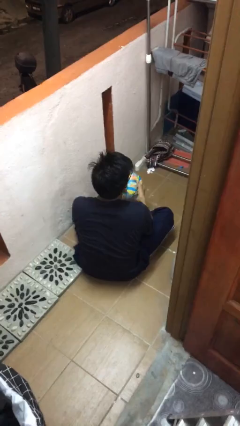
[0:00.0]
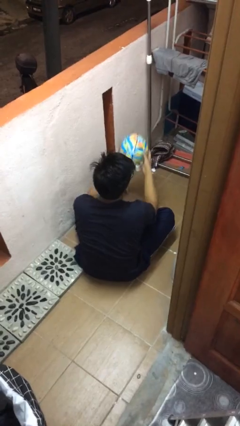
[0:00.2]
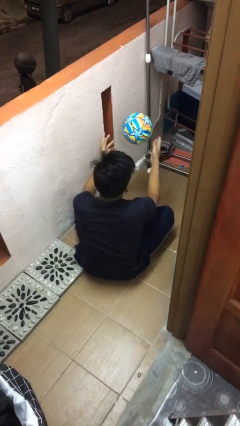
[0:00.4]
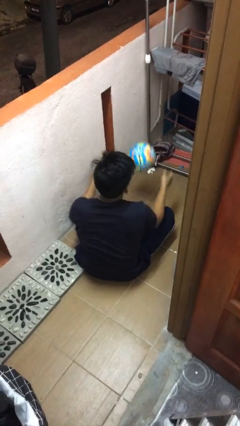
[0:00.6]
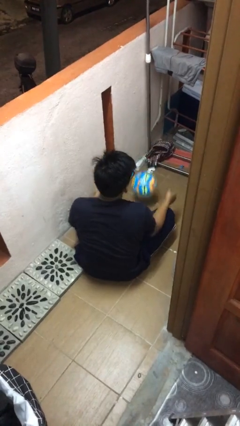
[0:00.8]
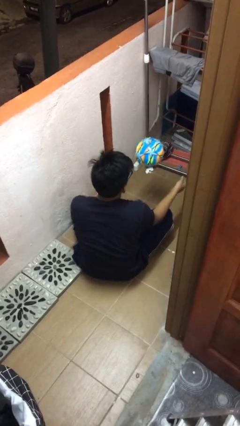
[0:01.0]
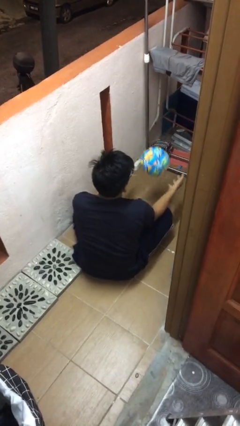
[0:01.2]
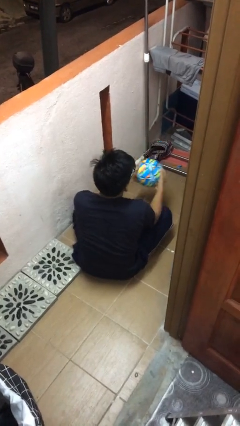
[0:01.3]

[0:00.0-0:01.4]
person bounces ball on floor

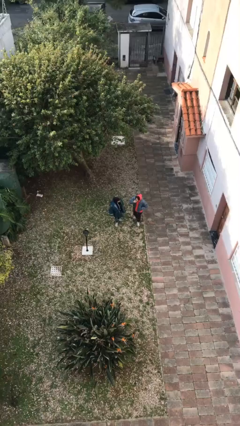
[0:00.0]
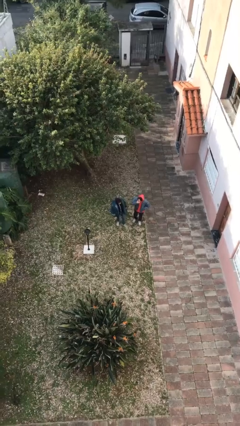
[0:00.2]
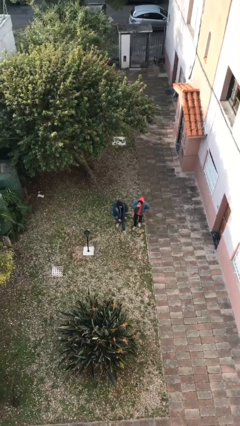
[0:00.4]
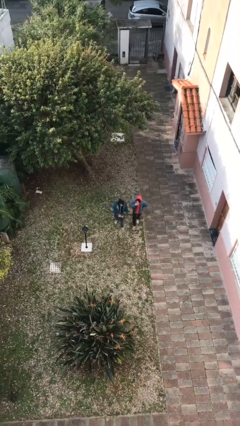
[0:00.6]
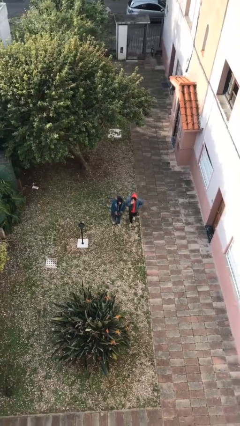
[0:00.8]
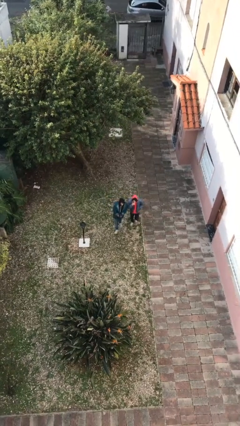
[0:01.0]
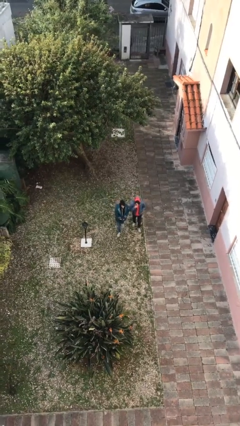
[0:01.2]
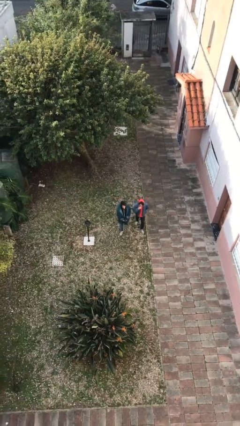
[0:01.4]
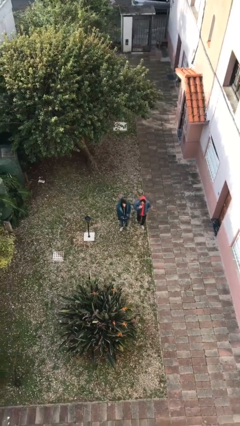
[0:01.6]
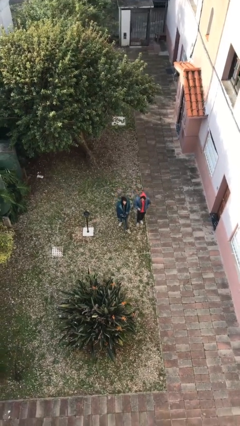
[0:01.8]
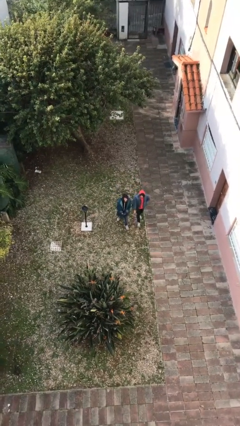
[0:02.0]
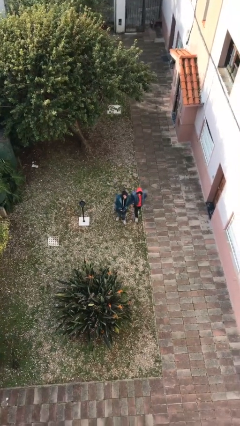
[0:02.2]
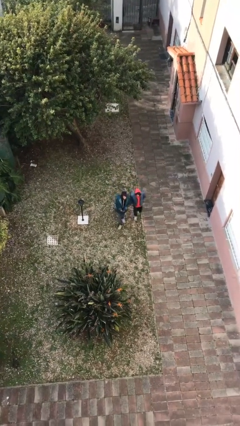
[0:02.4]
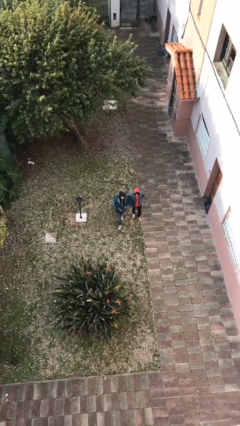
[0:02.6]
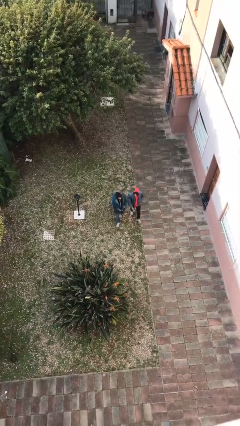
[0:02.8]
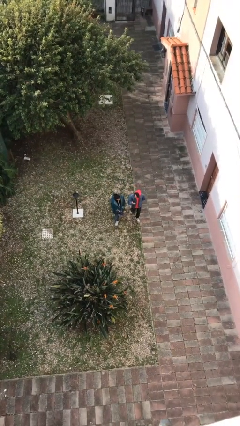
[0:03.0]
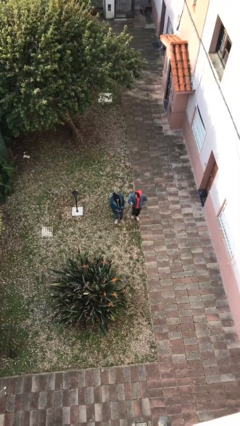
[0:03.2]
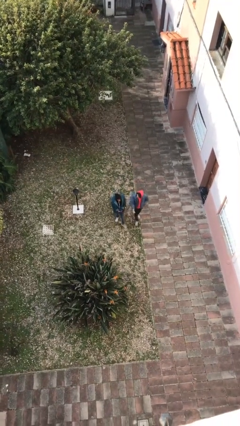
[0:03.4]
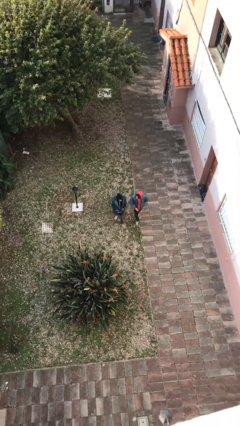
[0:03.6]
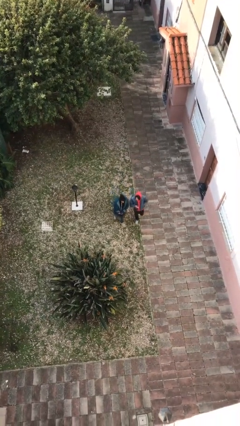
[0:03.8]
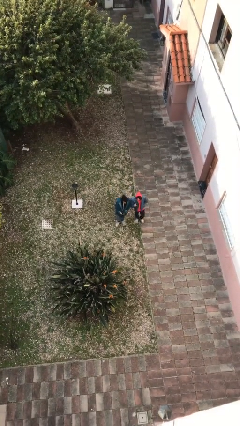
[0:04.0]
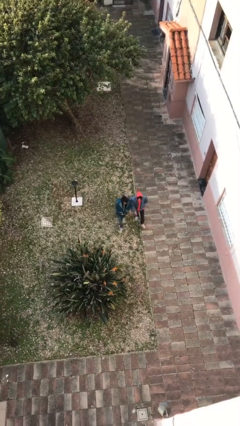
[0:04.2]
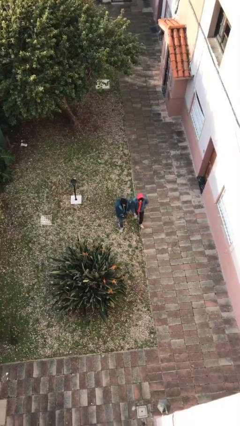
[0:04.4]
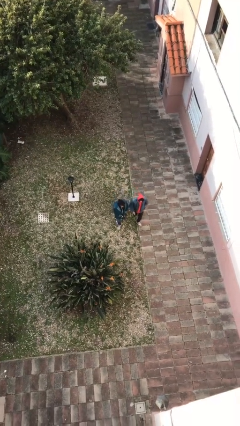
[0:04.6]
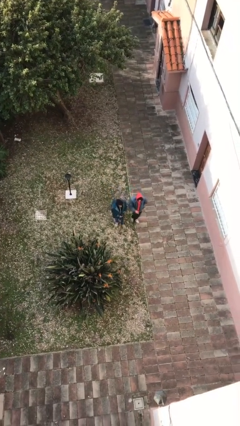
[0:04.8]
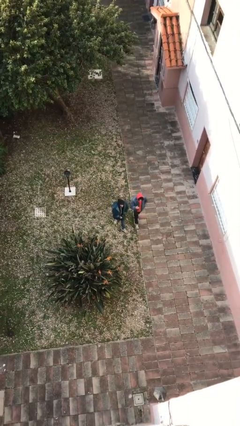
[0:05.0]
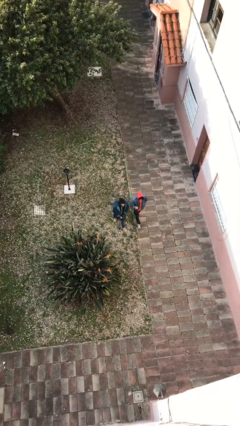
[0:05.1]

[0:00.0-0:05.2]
person talks to person

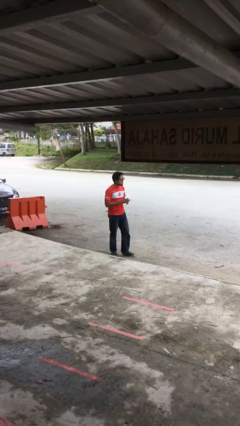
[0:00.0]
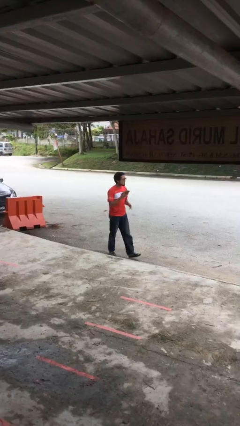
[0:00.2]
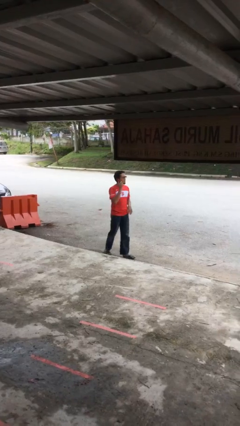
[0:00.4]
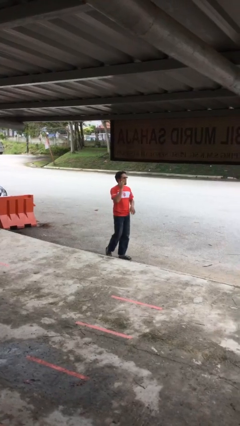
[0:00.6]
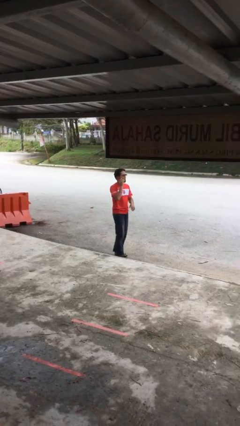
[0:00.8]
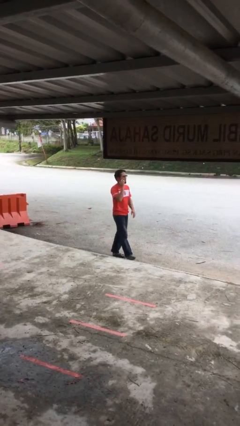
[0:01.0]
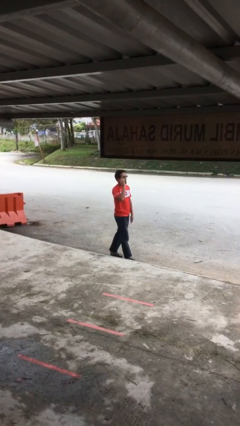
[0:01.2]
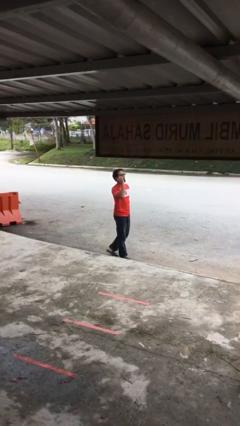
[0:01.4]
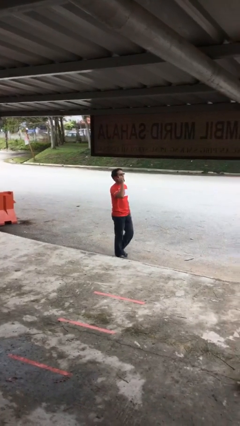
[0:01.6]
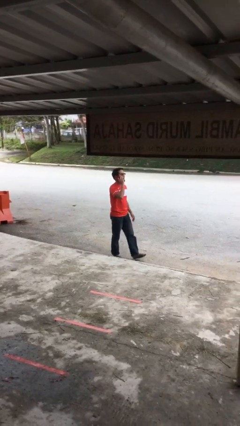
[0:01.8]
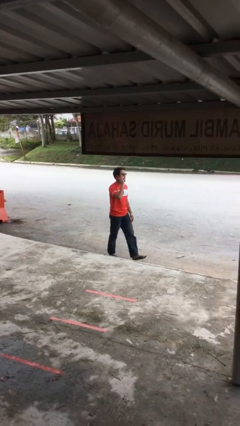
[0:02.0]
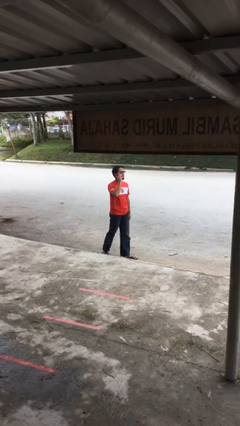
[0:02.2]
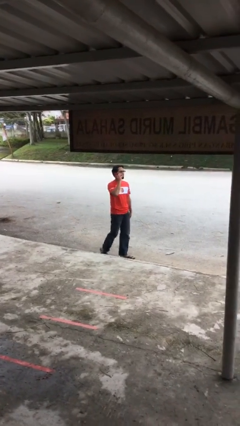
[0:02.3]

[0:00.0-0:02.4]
person talks on phone

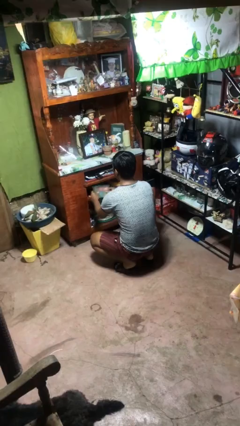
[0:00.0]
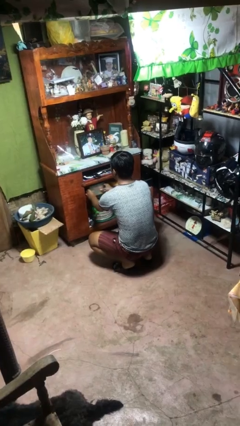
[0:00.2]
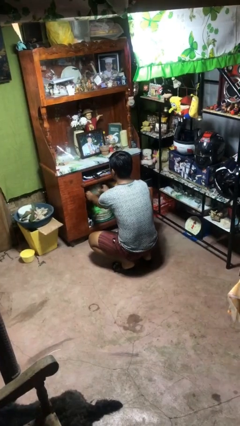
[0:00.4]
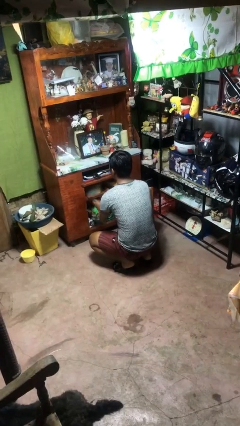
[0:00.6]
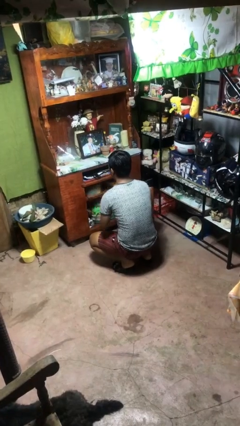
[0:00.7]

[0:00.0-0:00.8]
person puts down object into cabinet

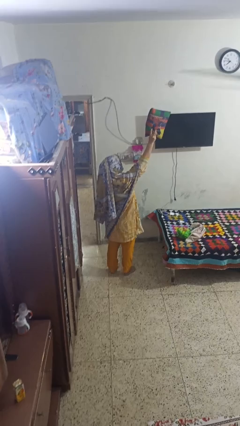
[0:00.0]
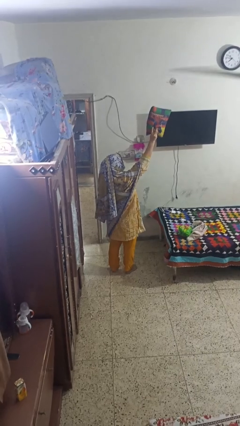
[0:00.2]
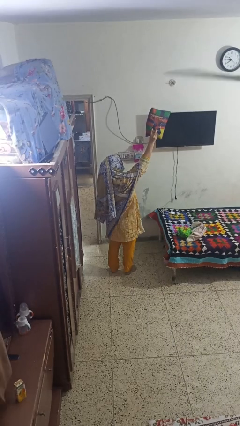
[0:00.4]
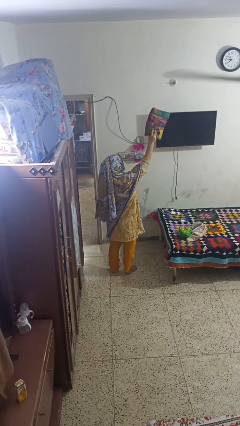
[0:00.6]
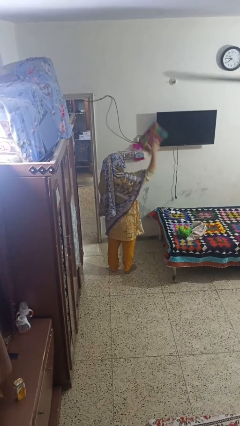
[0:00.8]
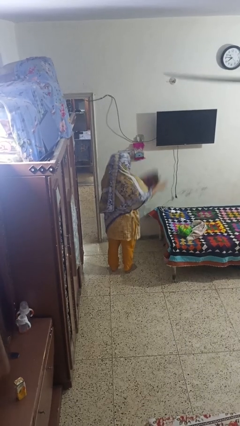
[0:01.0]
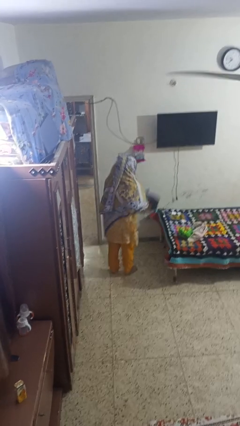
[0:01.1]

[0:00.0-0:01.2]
person drops object

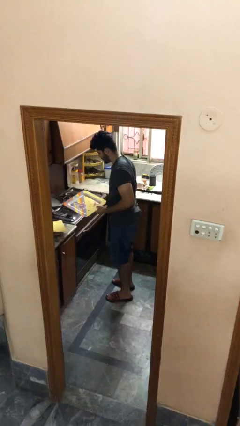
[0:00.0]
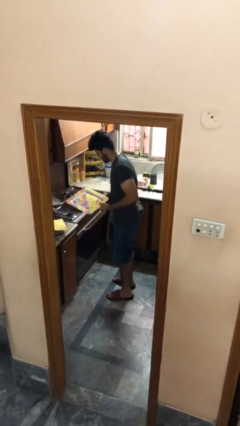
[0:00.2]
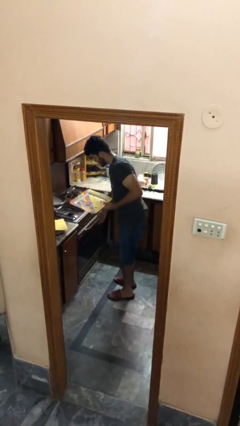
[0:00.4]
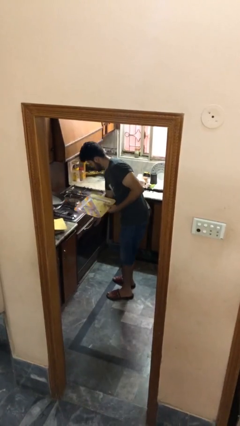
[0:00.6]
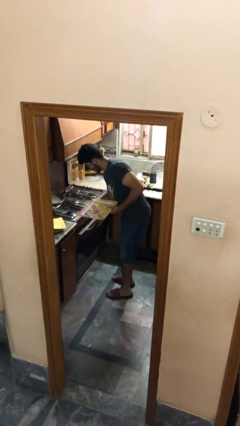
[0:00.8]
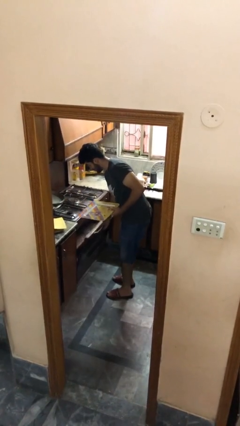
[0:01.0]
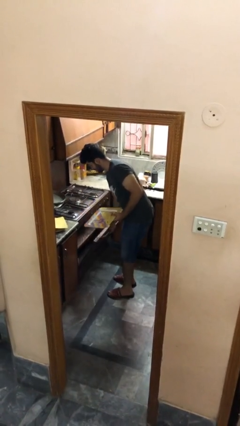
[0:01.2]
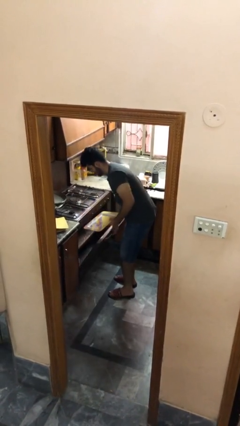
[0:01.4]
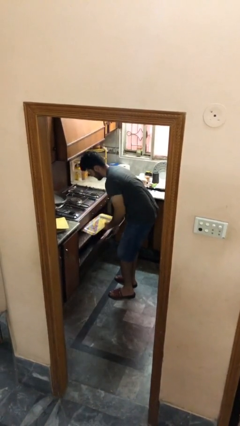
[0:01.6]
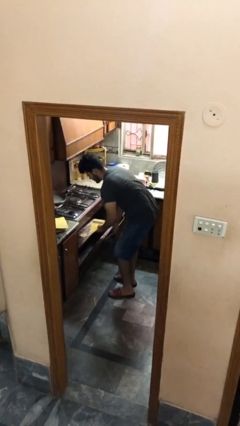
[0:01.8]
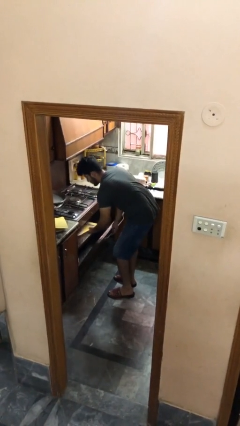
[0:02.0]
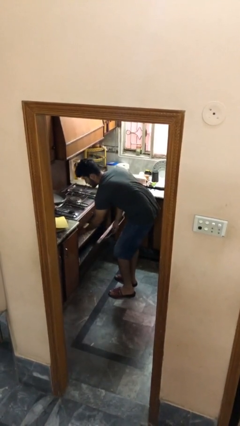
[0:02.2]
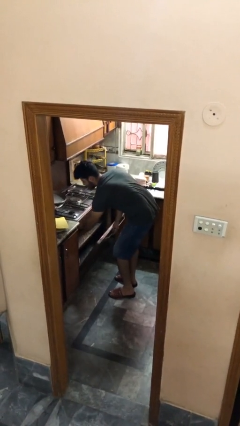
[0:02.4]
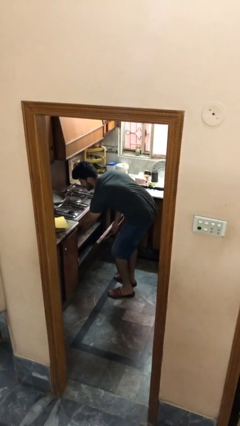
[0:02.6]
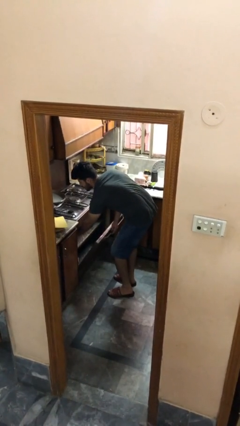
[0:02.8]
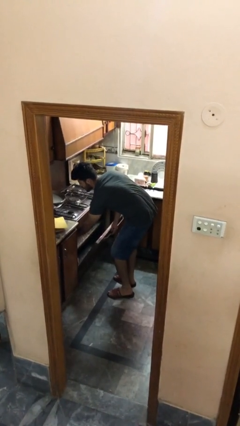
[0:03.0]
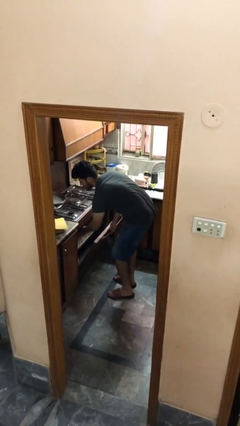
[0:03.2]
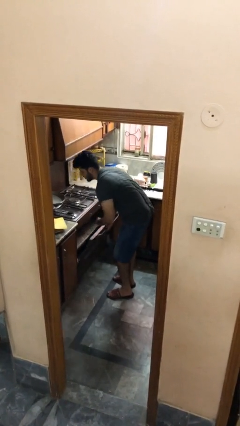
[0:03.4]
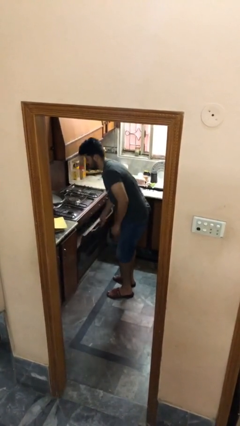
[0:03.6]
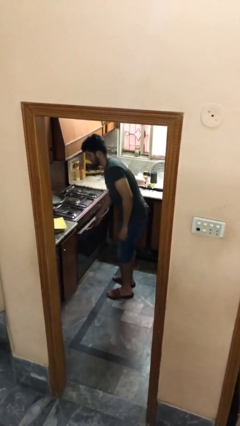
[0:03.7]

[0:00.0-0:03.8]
person puts object into oven

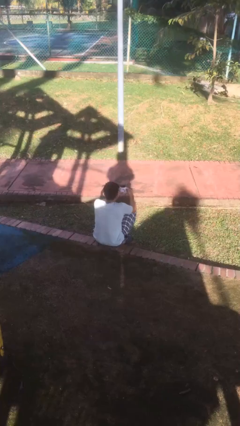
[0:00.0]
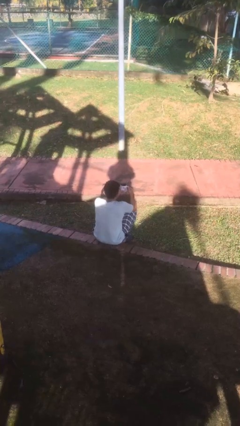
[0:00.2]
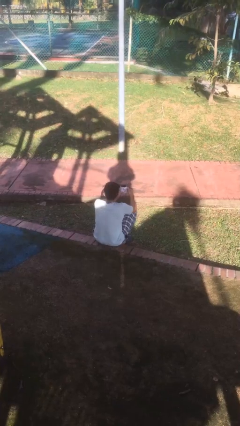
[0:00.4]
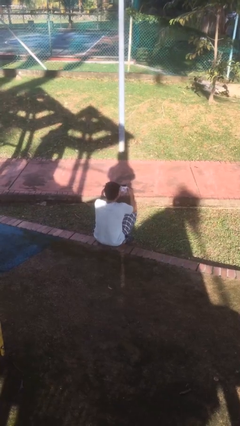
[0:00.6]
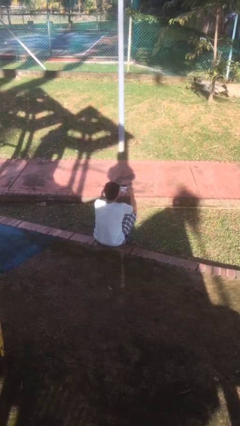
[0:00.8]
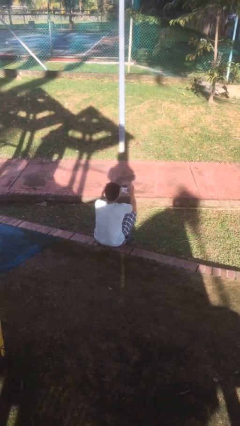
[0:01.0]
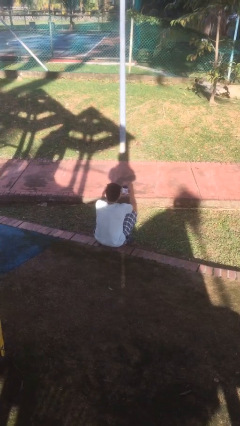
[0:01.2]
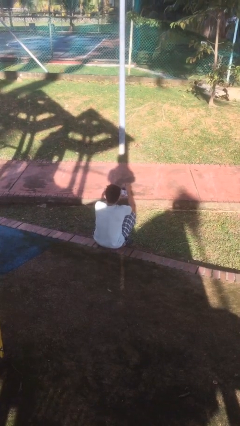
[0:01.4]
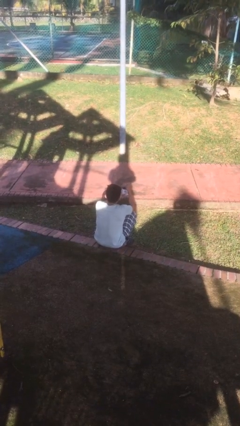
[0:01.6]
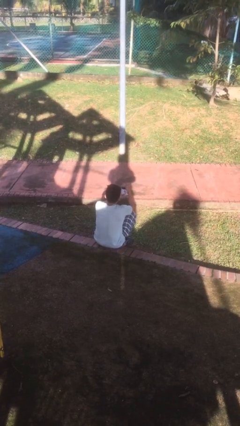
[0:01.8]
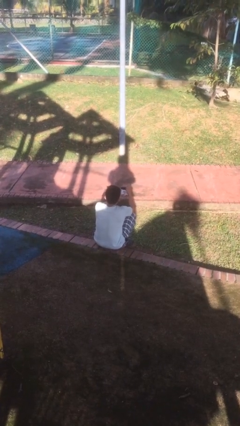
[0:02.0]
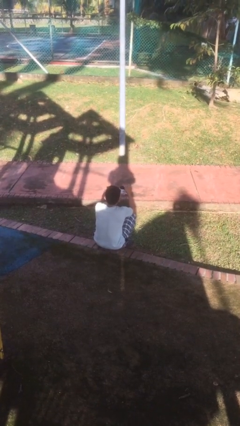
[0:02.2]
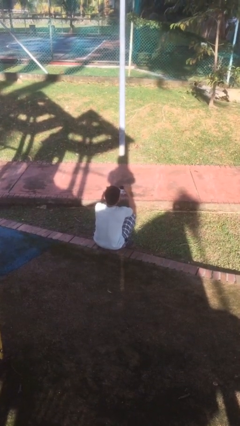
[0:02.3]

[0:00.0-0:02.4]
person stirs mug
